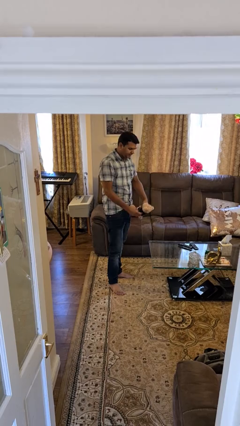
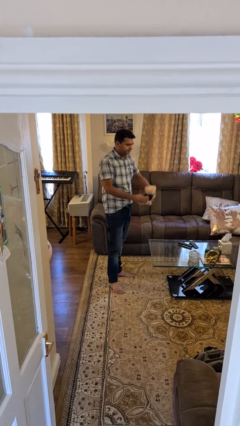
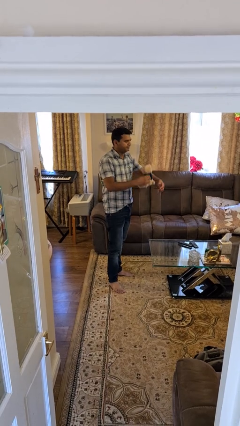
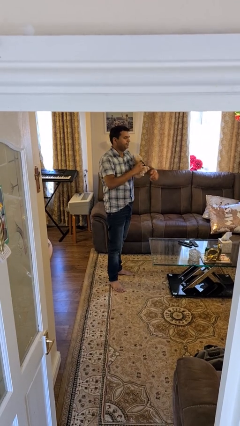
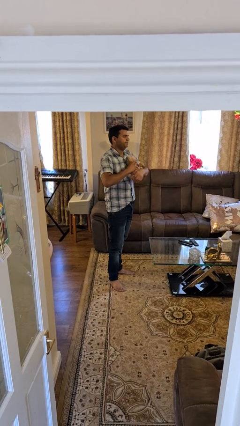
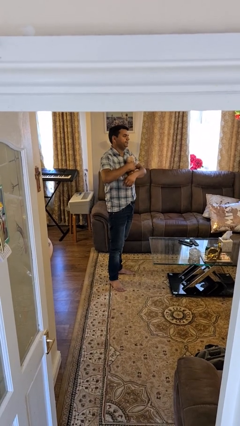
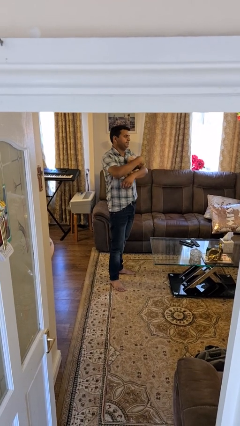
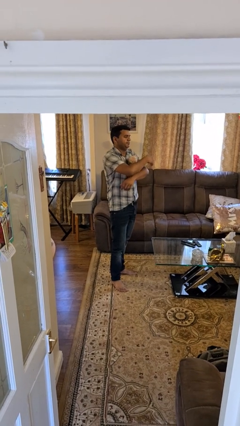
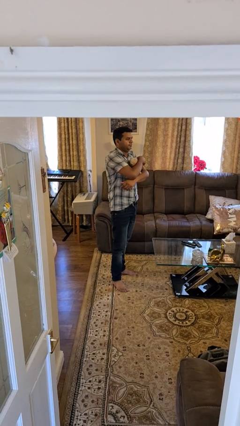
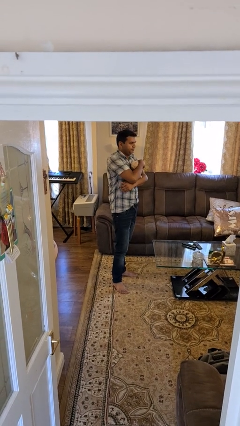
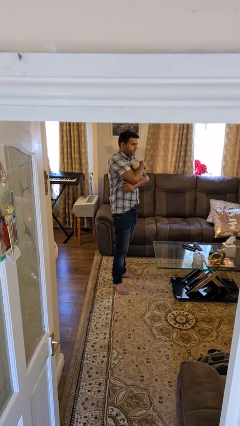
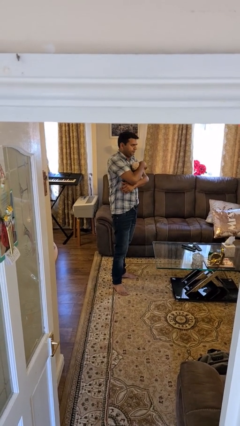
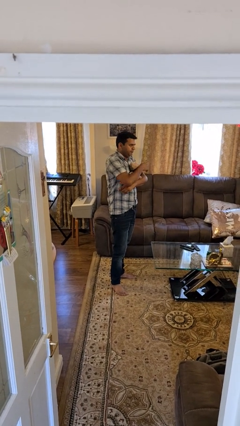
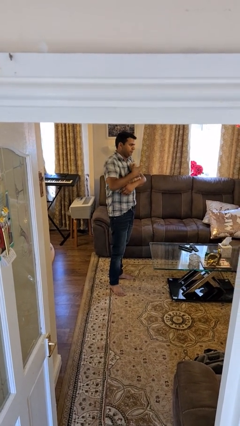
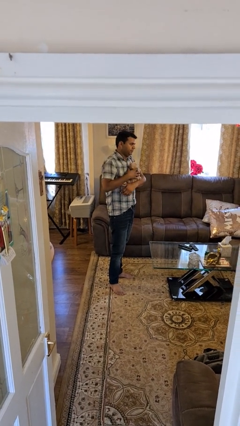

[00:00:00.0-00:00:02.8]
person hugs stuffed animal

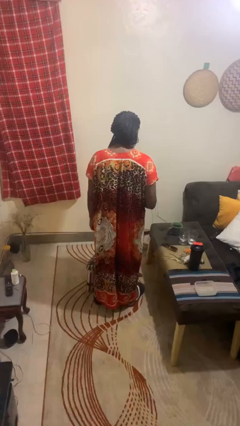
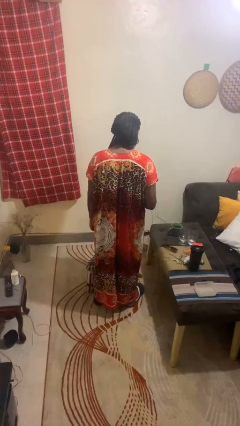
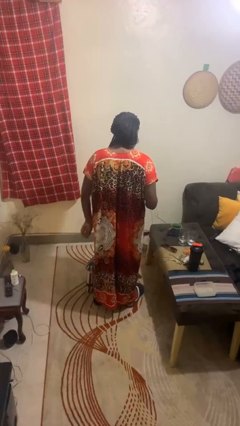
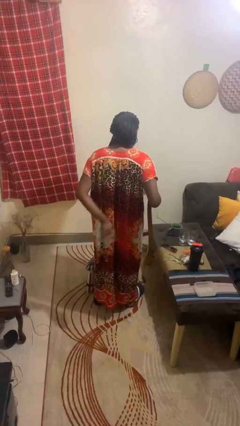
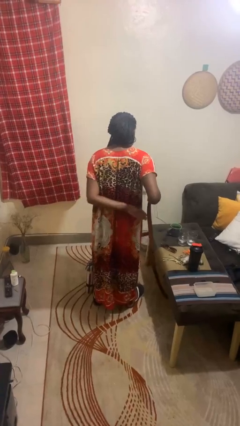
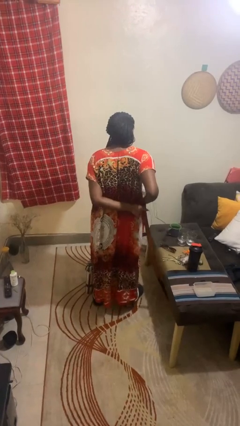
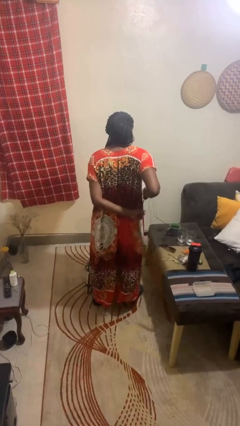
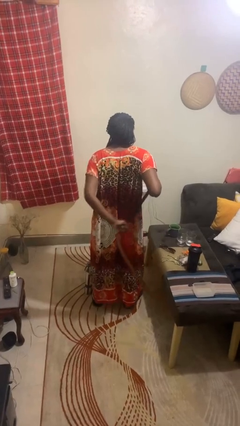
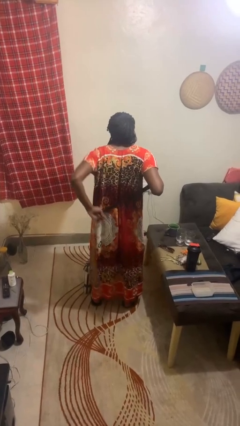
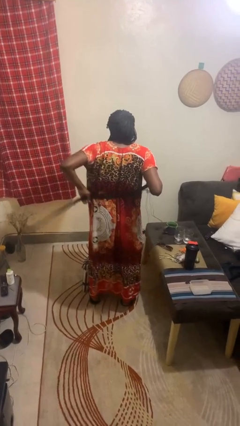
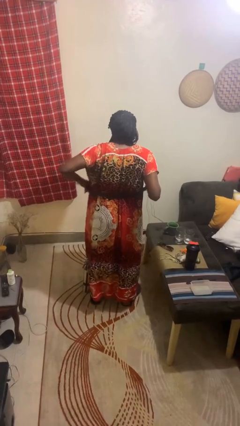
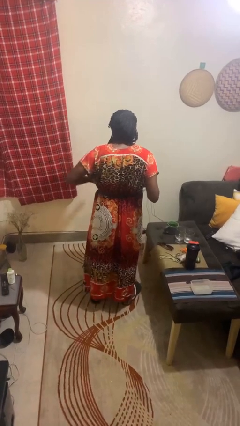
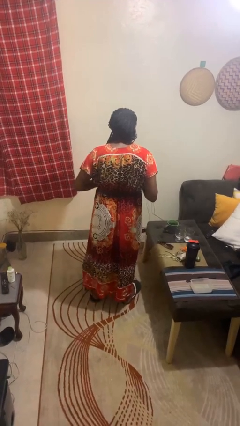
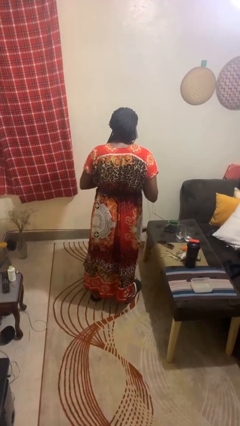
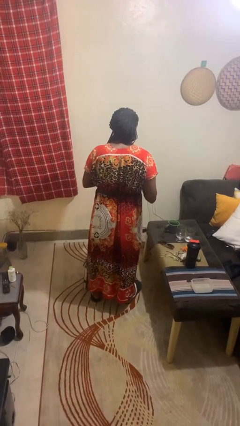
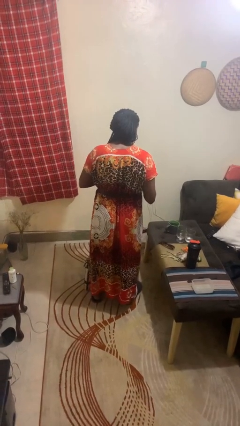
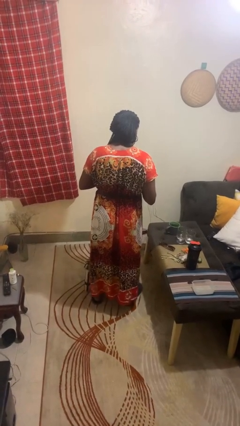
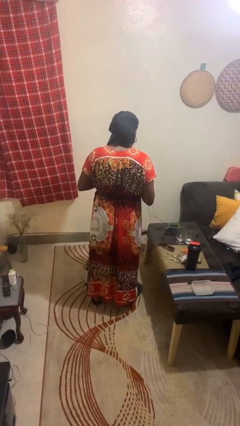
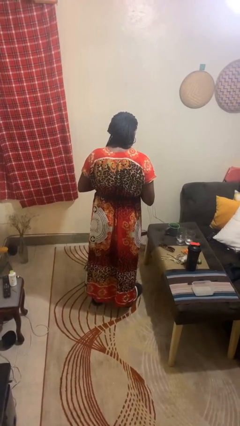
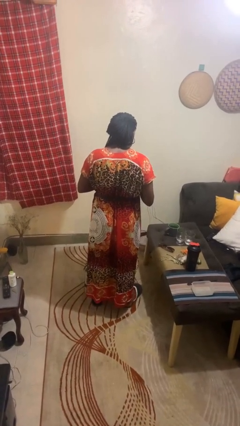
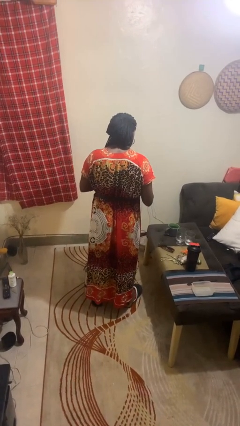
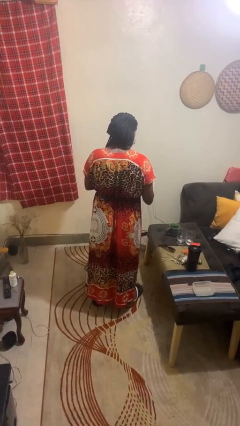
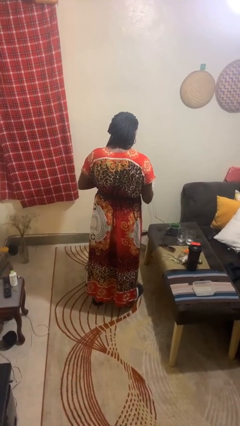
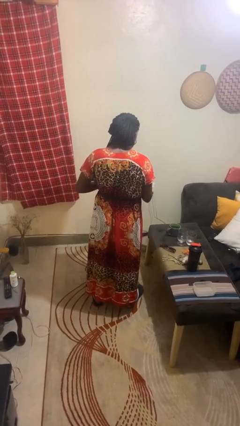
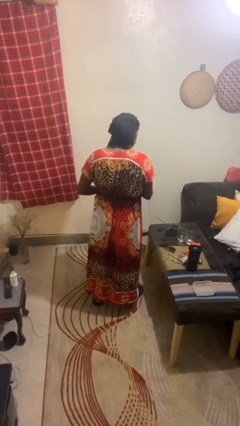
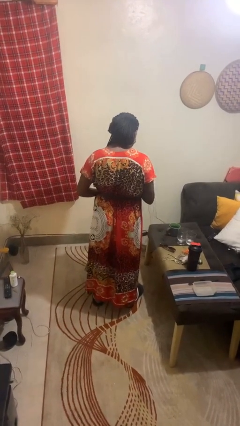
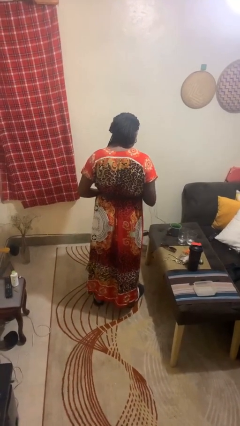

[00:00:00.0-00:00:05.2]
person puts on belt

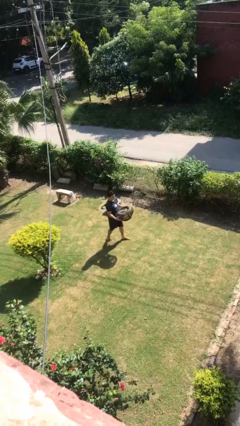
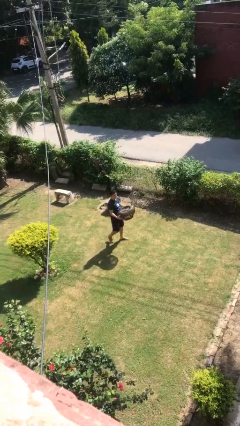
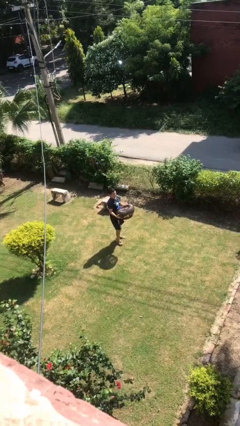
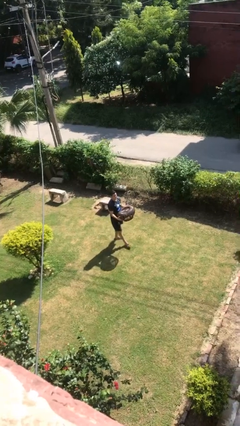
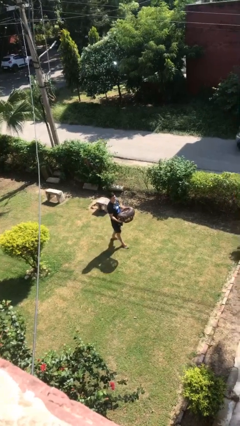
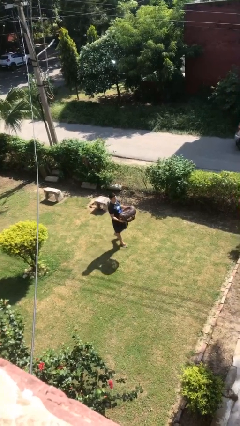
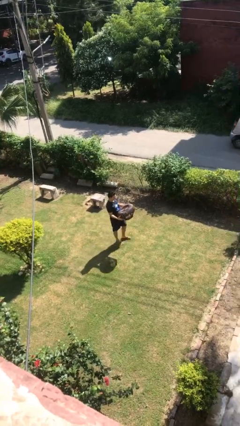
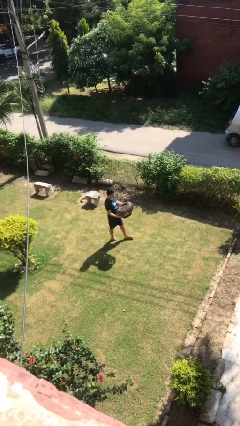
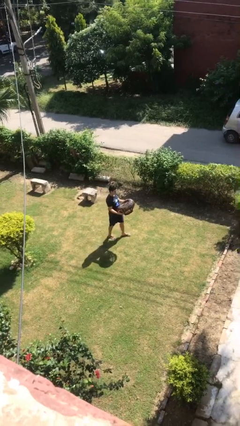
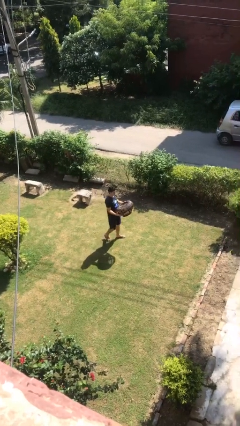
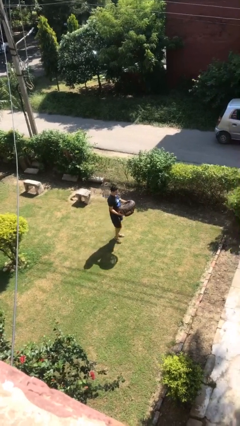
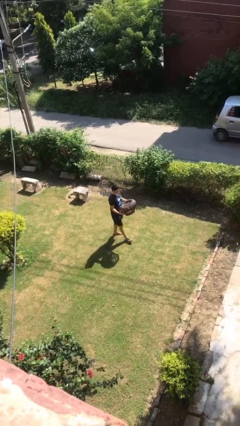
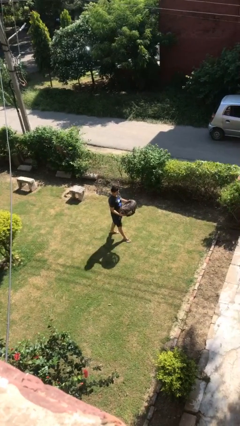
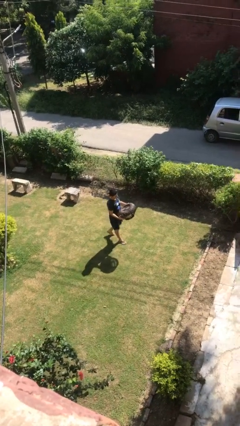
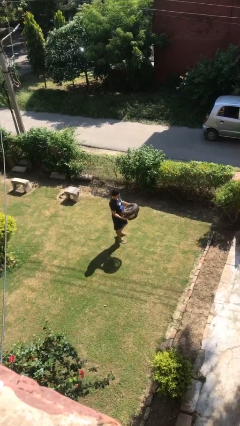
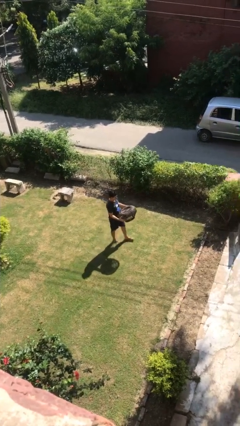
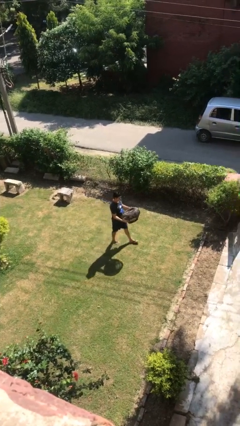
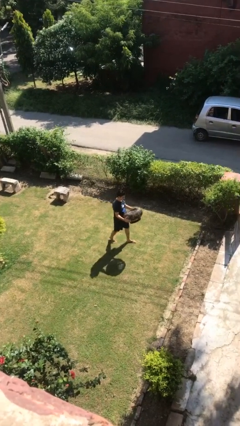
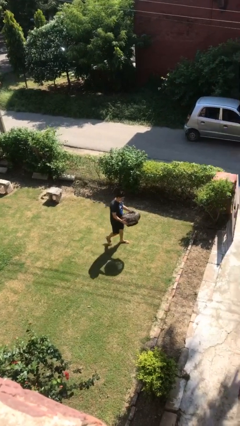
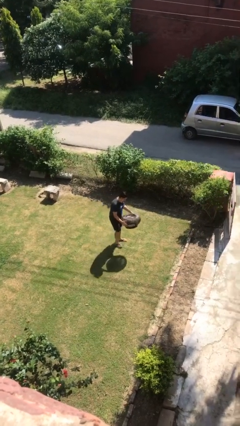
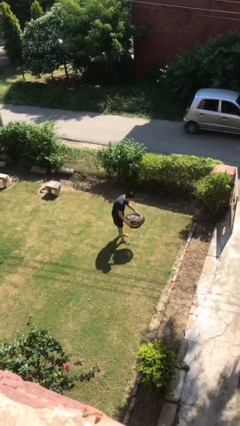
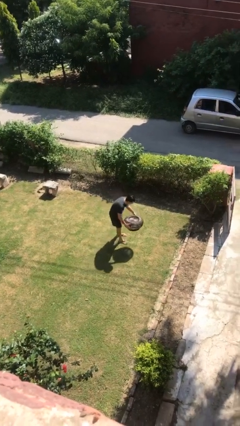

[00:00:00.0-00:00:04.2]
person carries heavy object

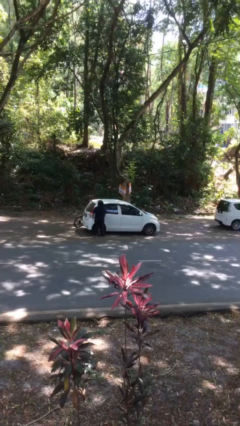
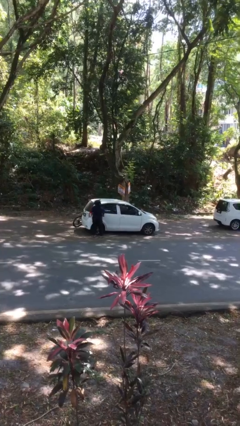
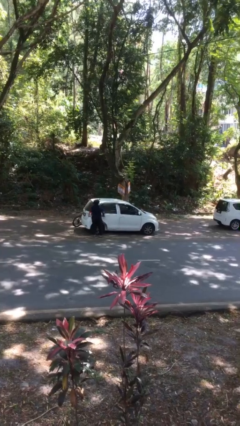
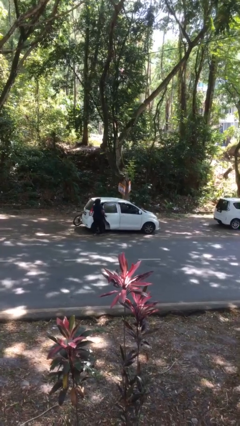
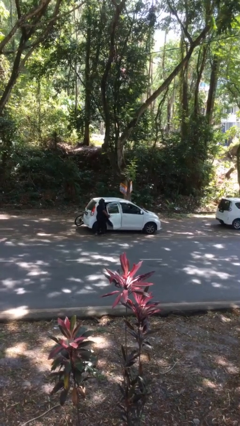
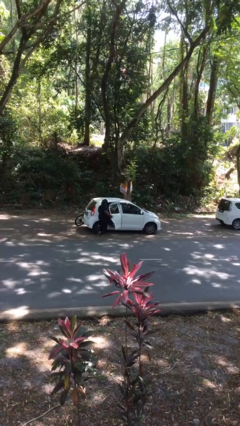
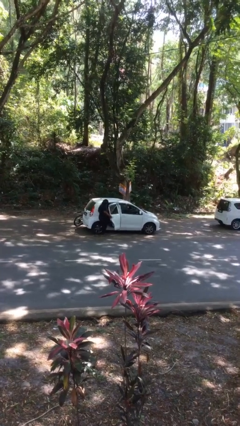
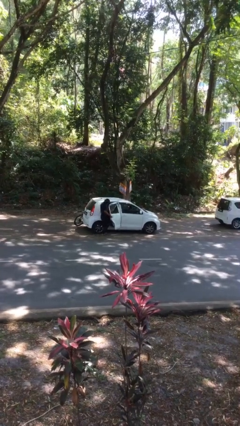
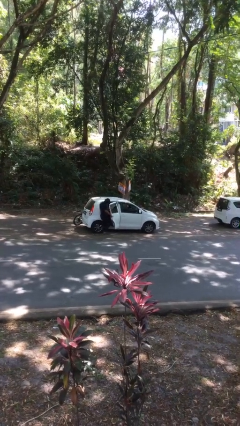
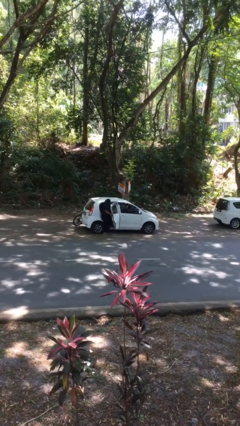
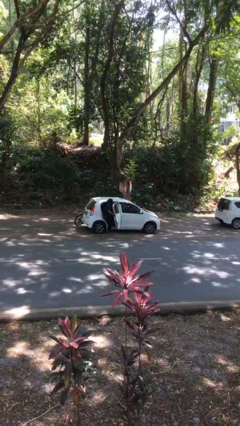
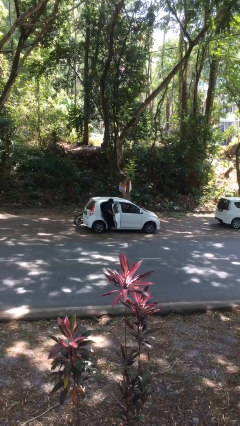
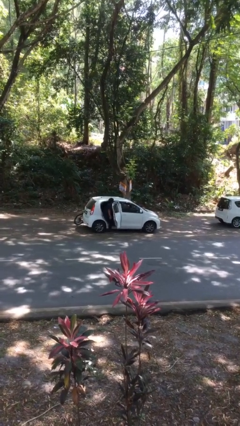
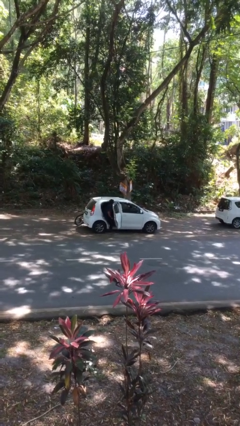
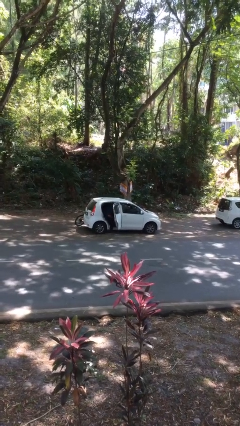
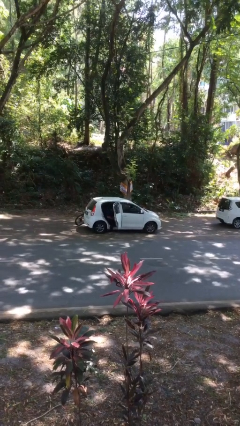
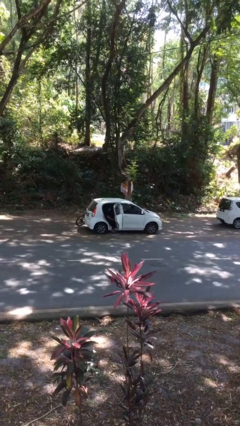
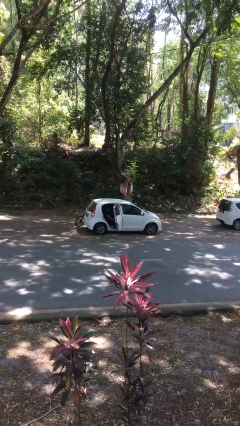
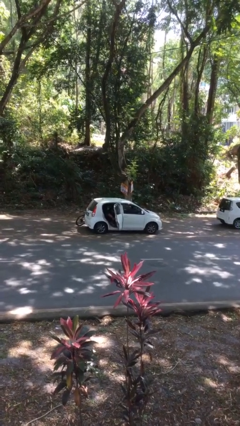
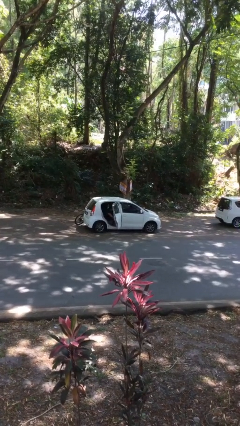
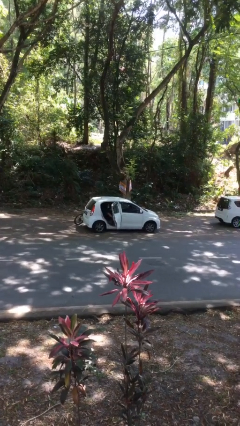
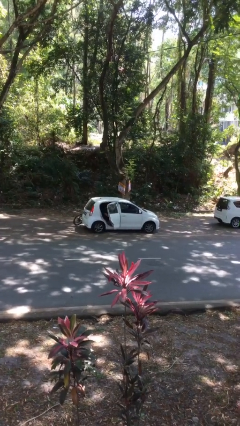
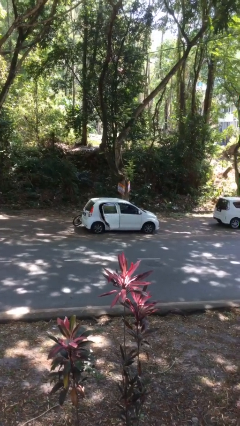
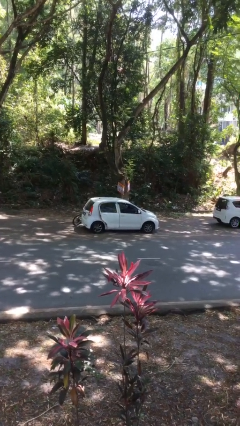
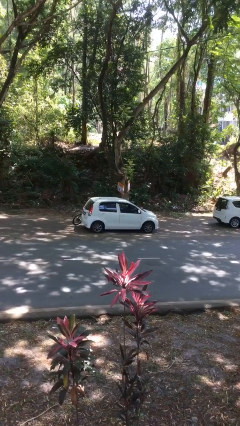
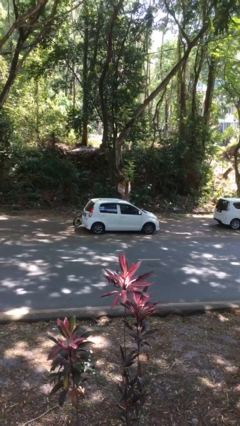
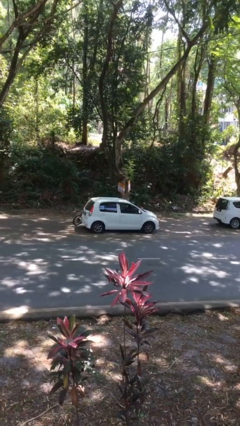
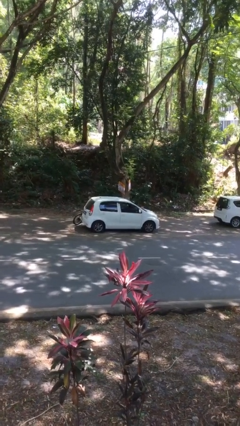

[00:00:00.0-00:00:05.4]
car picks up person
